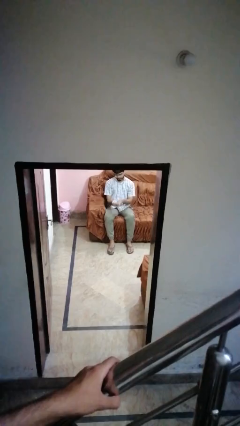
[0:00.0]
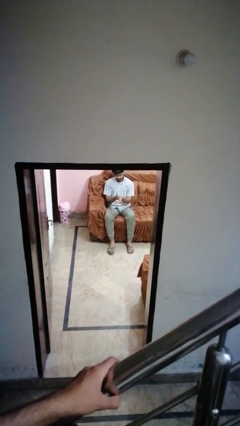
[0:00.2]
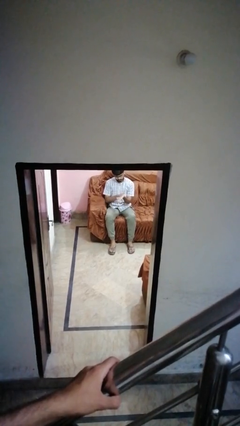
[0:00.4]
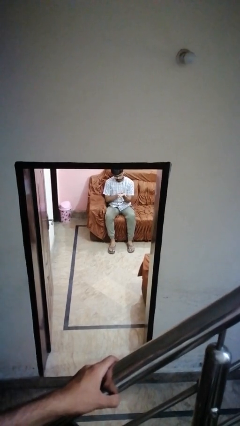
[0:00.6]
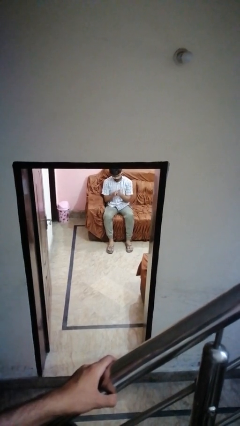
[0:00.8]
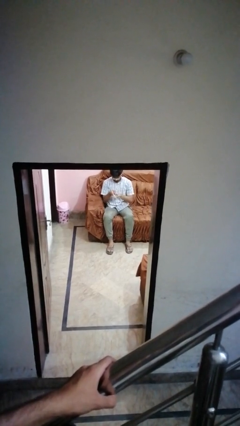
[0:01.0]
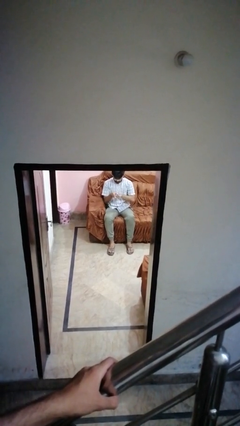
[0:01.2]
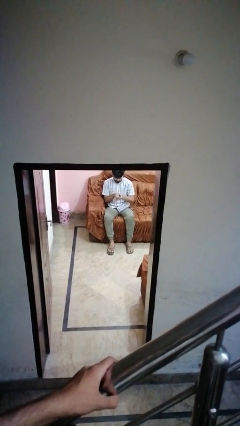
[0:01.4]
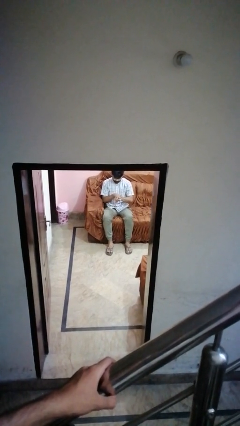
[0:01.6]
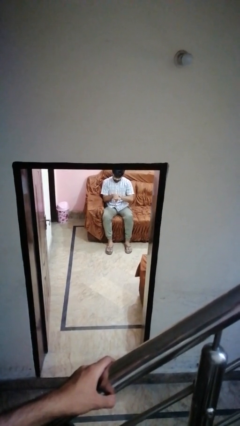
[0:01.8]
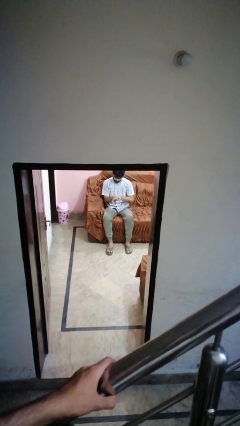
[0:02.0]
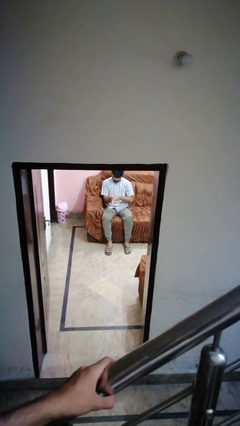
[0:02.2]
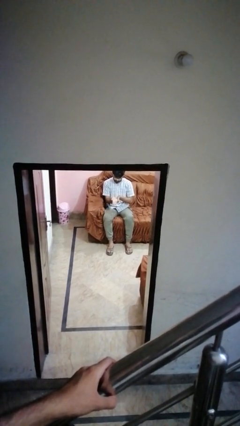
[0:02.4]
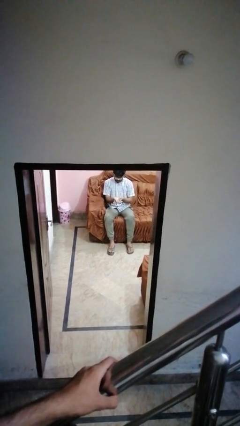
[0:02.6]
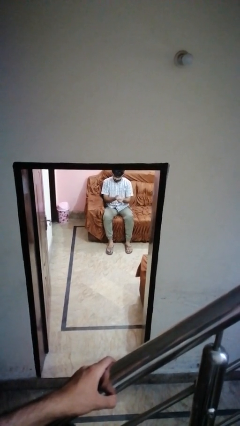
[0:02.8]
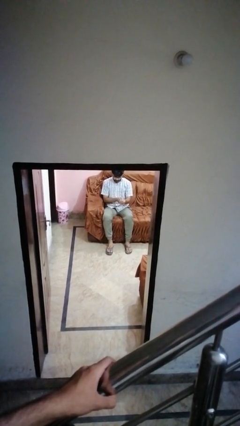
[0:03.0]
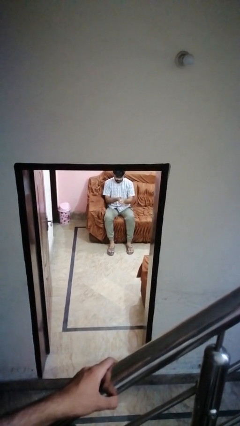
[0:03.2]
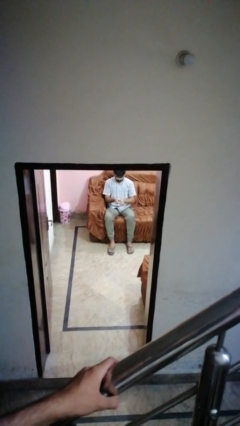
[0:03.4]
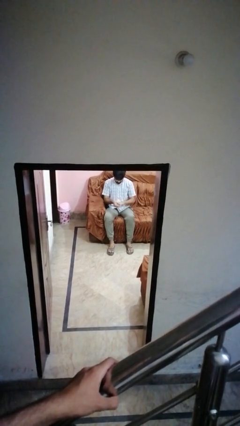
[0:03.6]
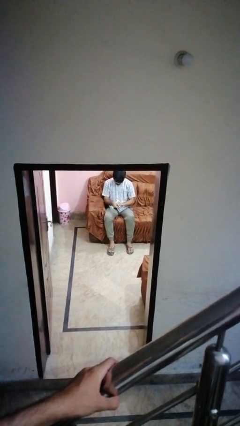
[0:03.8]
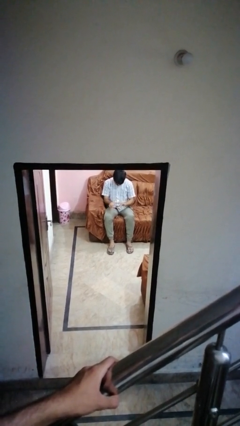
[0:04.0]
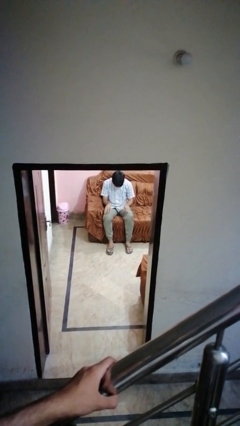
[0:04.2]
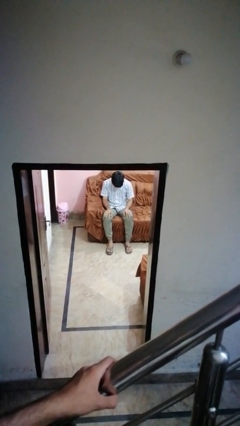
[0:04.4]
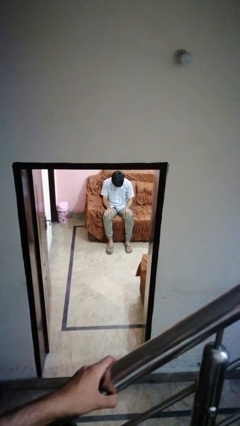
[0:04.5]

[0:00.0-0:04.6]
person looks at hands in lap

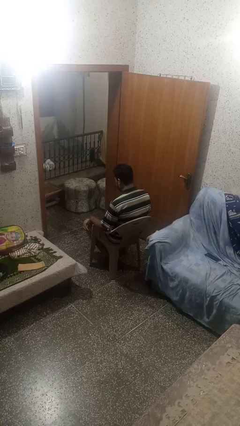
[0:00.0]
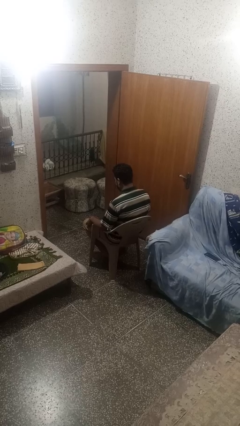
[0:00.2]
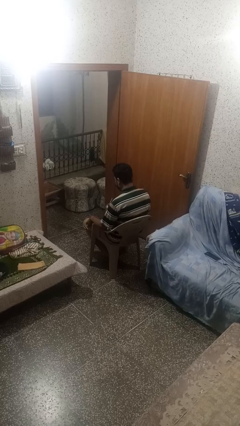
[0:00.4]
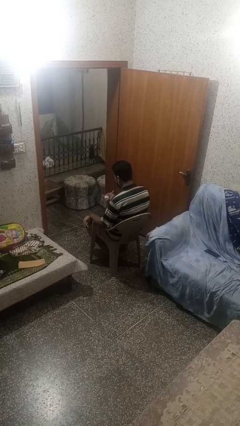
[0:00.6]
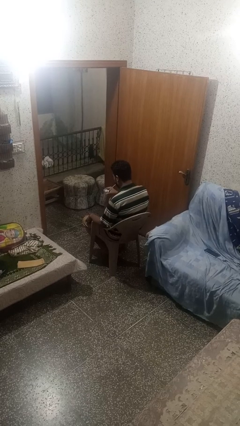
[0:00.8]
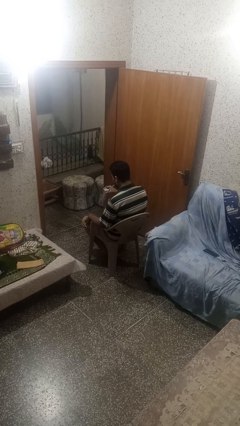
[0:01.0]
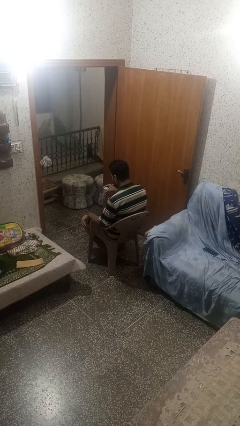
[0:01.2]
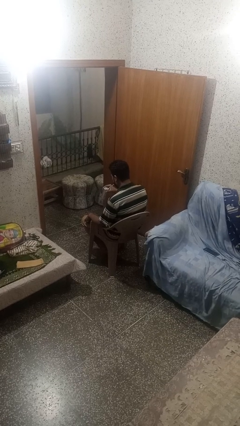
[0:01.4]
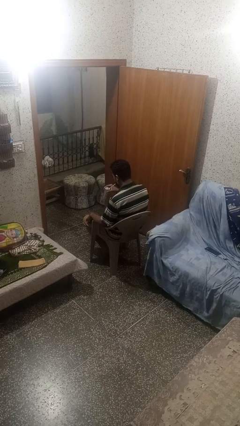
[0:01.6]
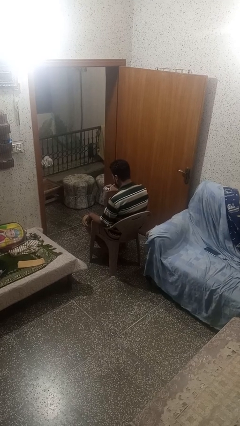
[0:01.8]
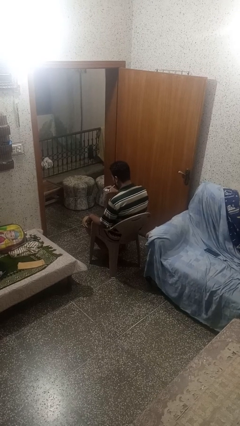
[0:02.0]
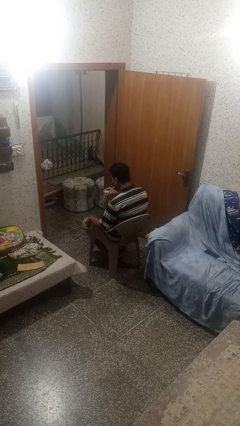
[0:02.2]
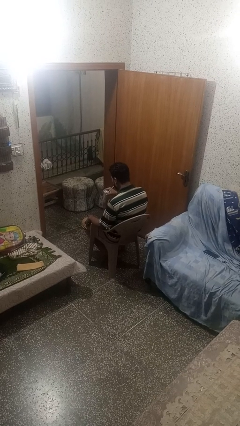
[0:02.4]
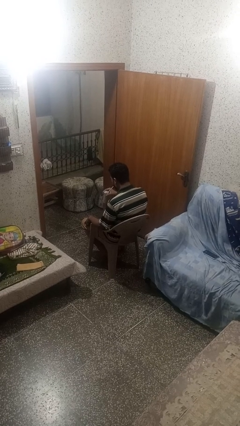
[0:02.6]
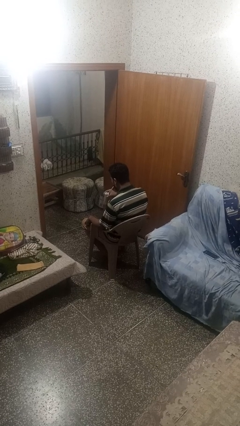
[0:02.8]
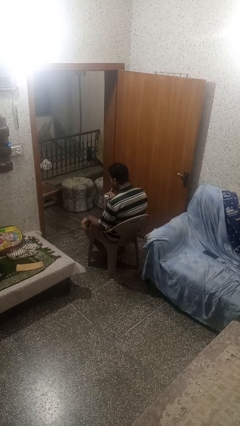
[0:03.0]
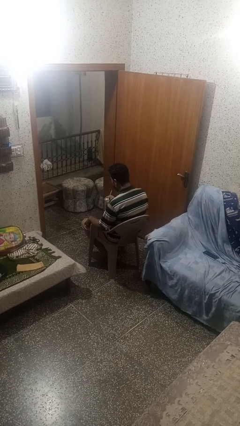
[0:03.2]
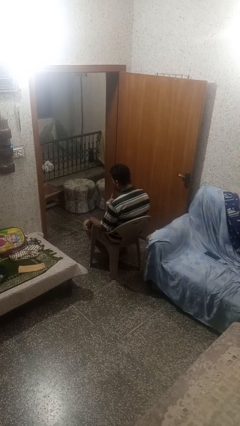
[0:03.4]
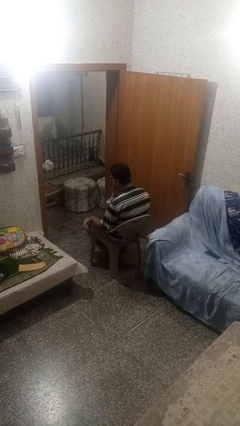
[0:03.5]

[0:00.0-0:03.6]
person drinks from straw

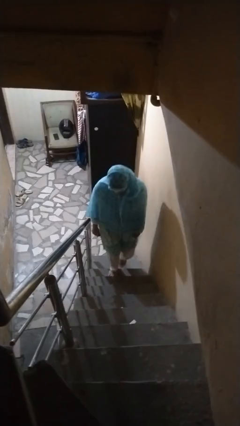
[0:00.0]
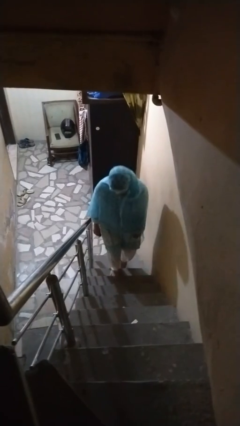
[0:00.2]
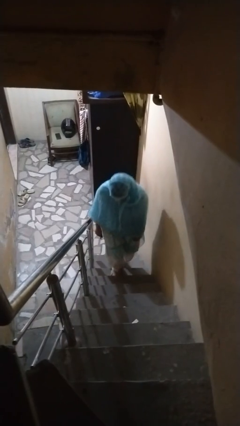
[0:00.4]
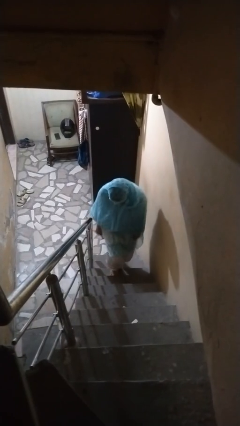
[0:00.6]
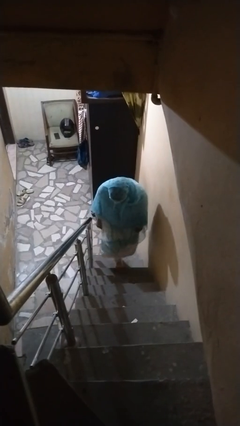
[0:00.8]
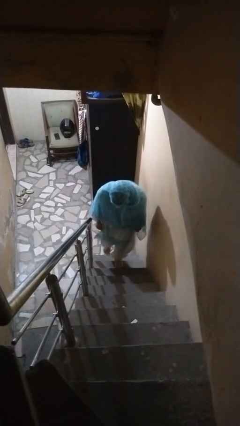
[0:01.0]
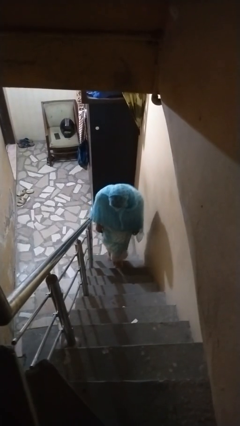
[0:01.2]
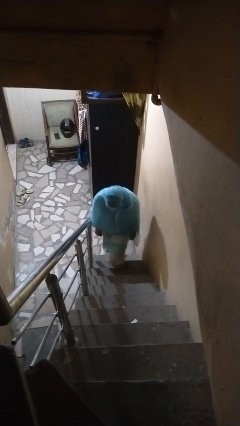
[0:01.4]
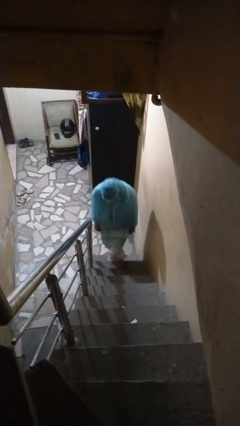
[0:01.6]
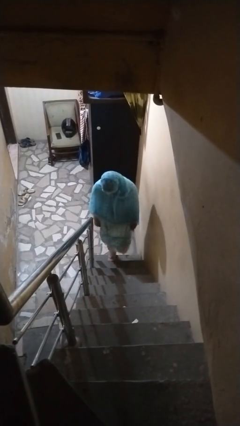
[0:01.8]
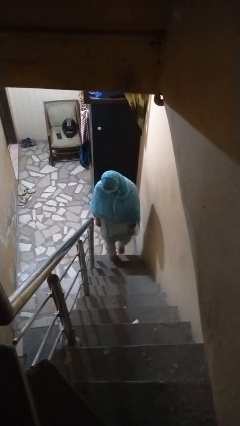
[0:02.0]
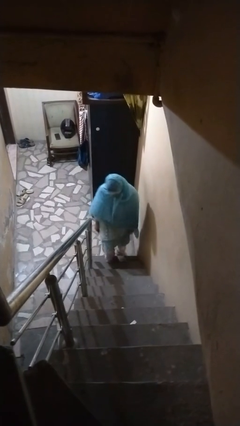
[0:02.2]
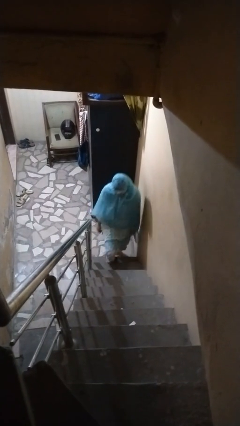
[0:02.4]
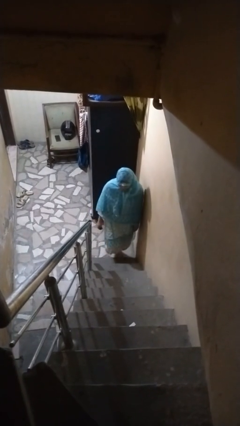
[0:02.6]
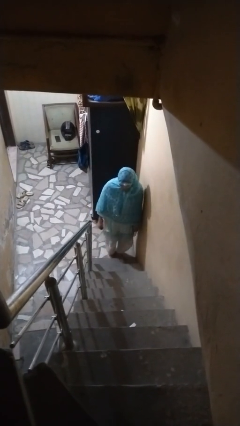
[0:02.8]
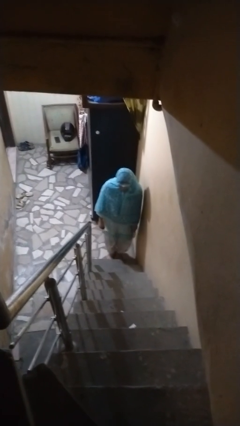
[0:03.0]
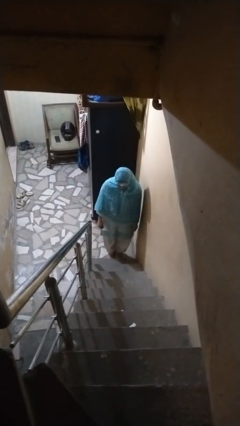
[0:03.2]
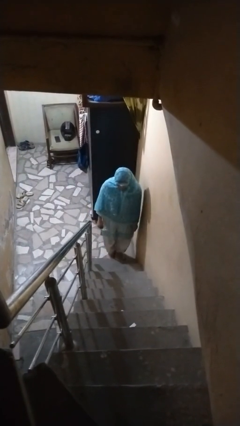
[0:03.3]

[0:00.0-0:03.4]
person climbs down stairs

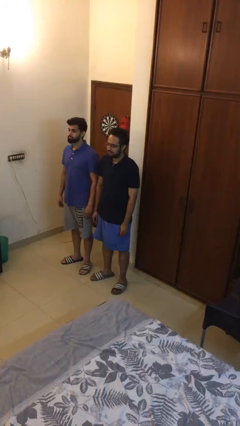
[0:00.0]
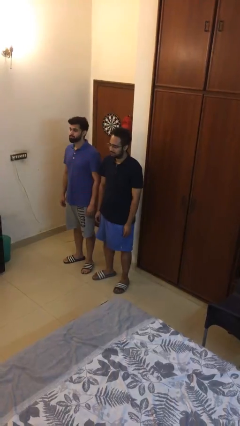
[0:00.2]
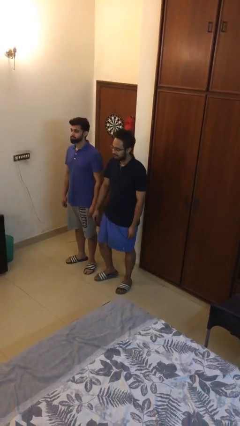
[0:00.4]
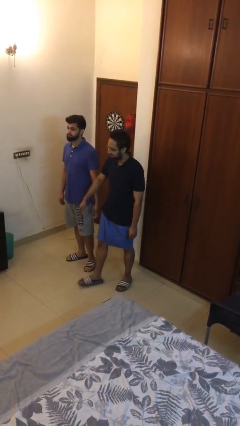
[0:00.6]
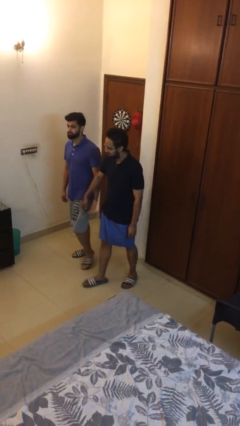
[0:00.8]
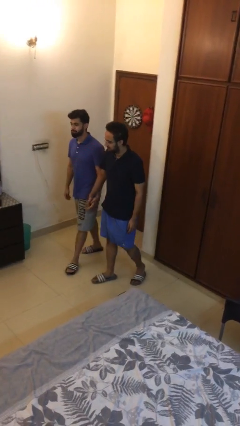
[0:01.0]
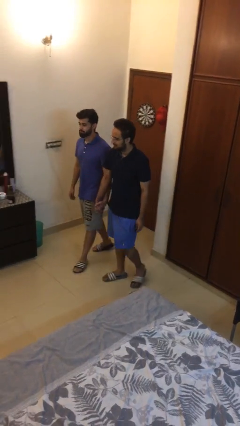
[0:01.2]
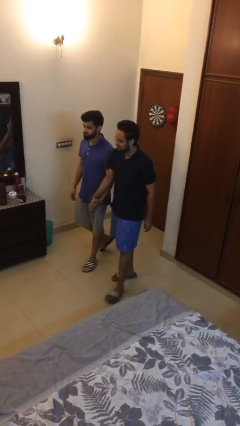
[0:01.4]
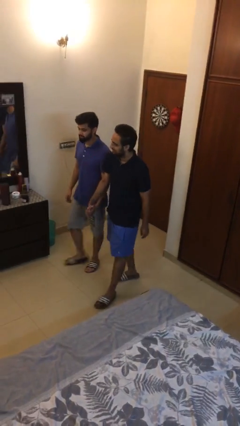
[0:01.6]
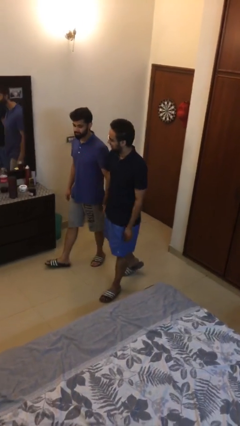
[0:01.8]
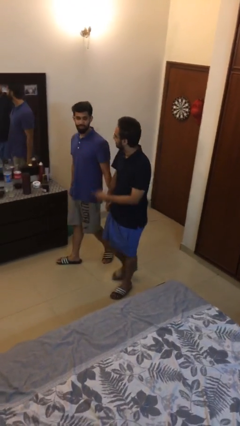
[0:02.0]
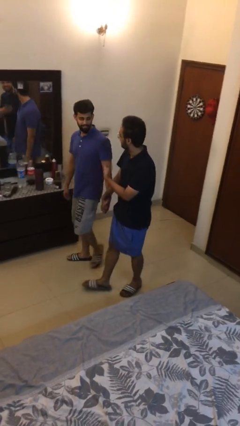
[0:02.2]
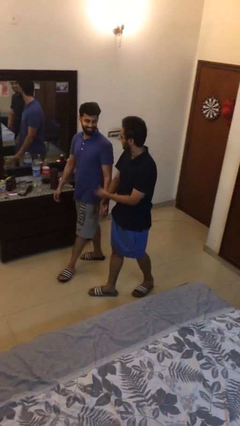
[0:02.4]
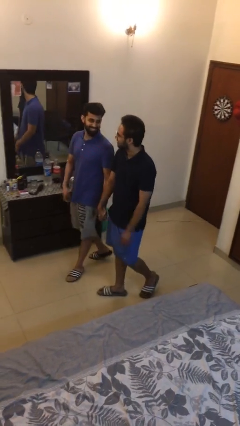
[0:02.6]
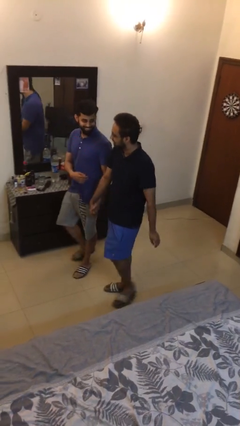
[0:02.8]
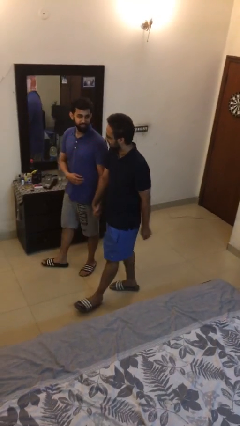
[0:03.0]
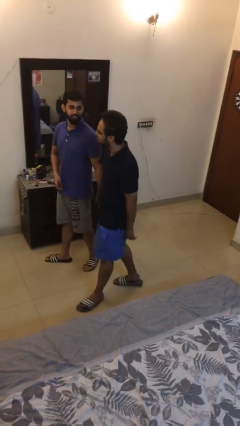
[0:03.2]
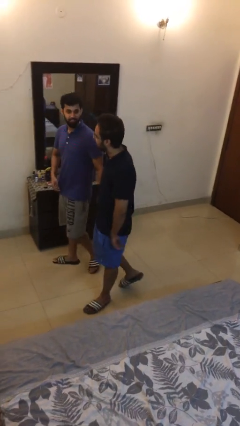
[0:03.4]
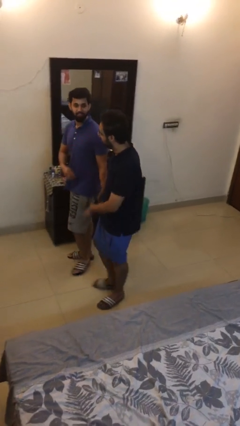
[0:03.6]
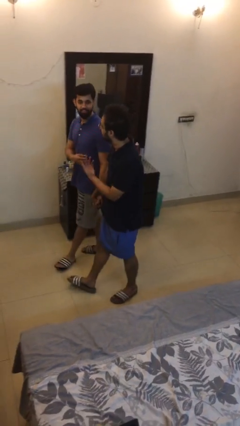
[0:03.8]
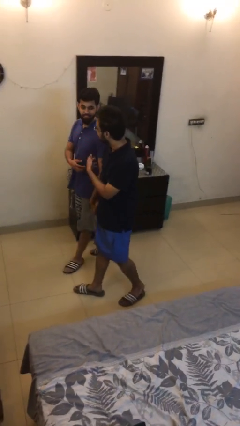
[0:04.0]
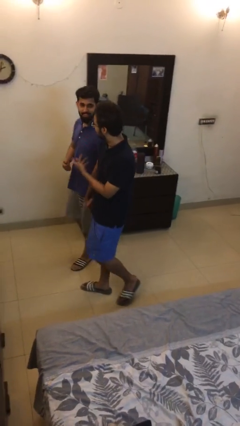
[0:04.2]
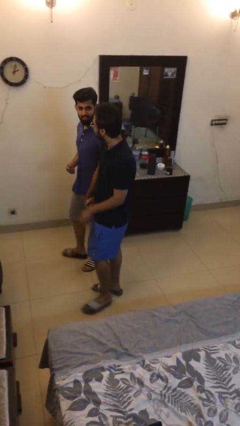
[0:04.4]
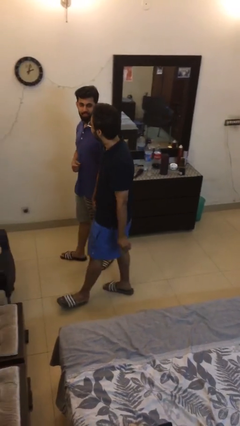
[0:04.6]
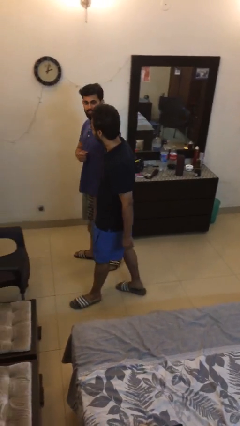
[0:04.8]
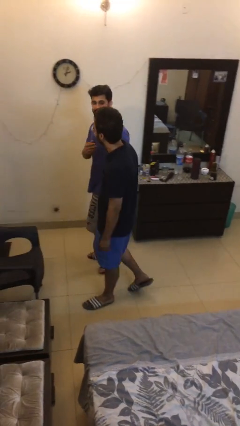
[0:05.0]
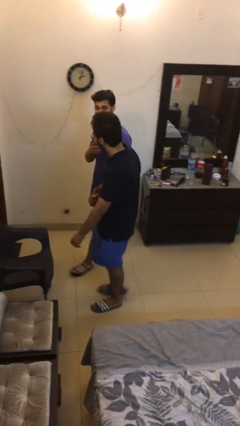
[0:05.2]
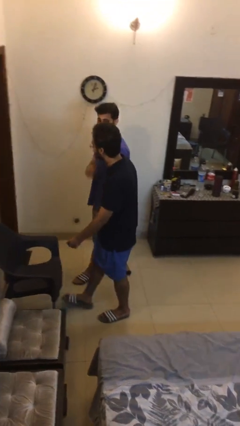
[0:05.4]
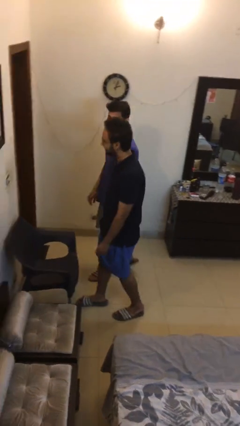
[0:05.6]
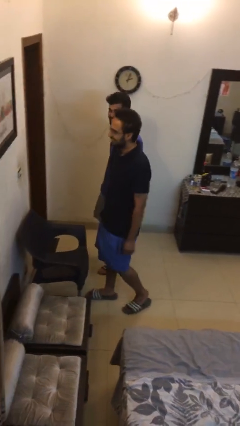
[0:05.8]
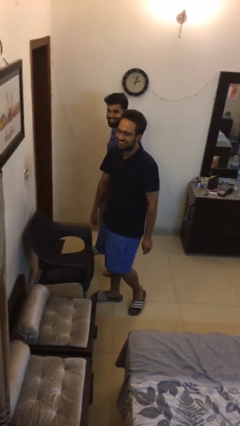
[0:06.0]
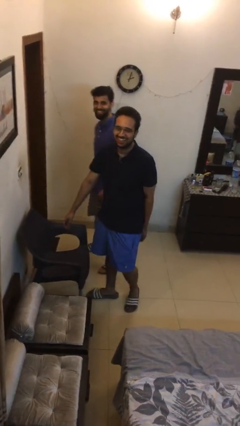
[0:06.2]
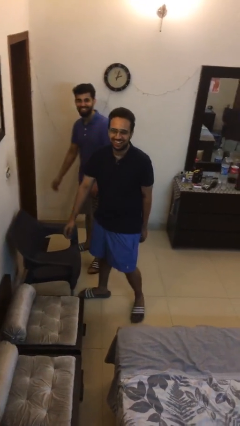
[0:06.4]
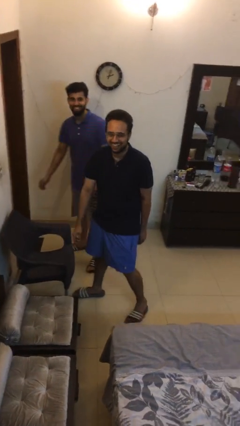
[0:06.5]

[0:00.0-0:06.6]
person holds hand
